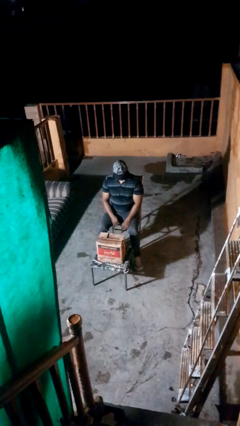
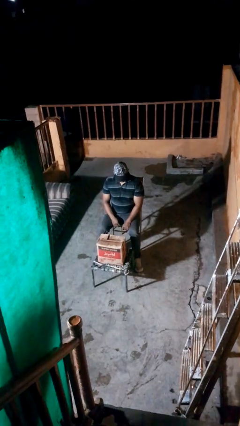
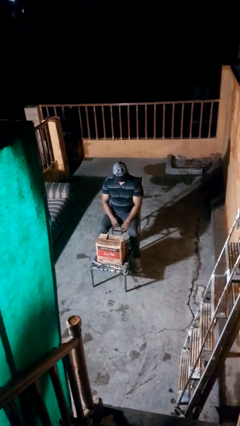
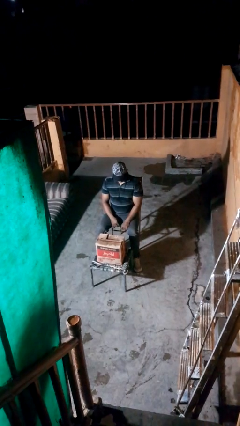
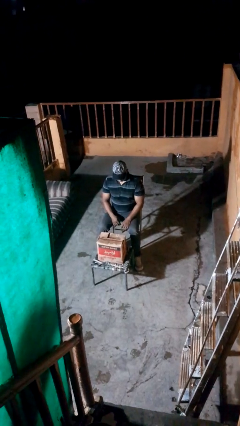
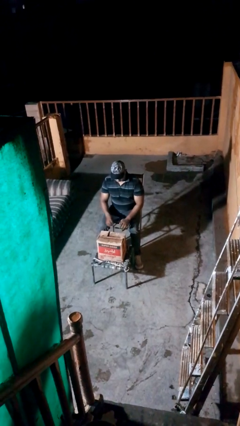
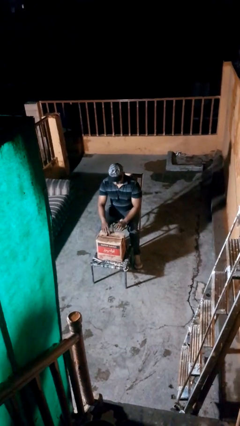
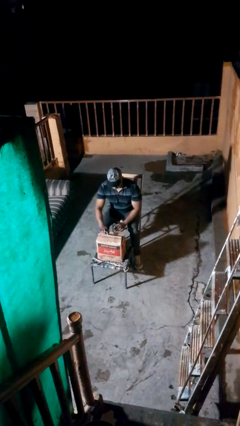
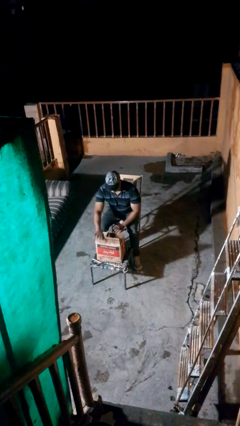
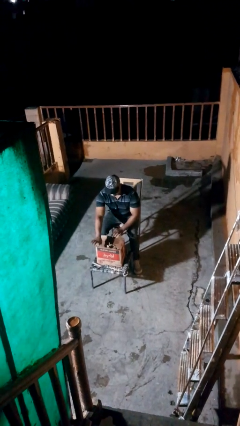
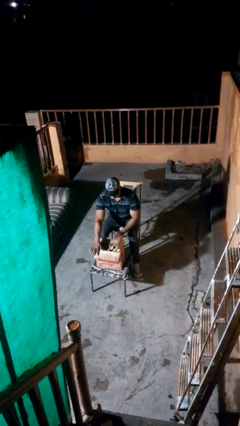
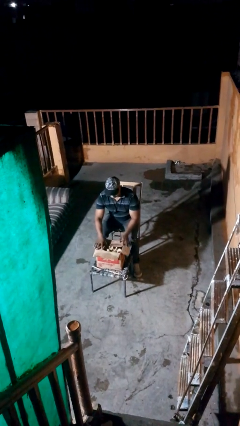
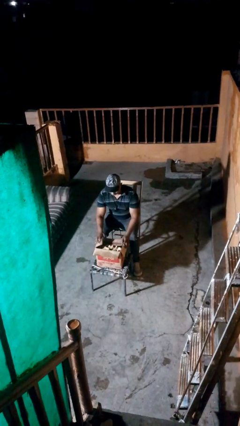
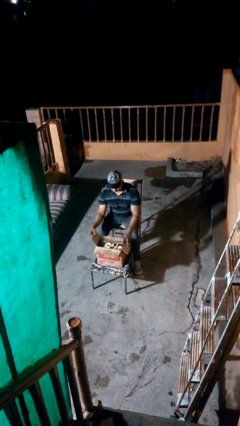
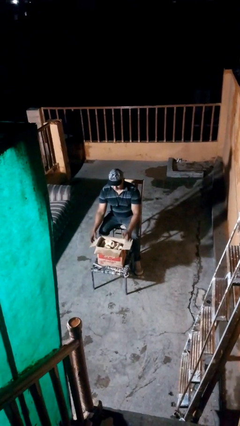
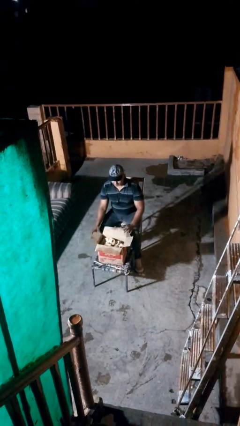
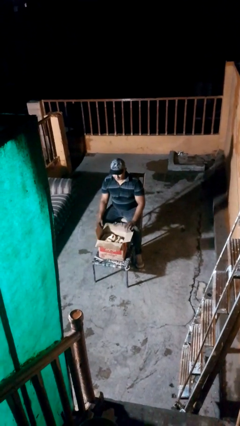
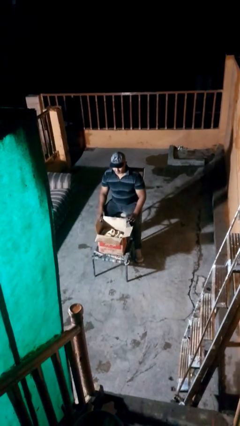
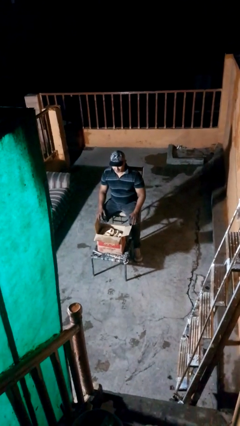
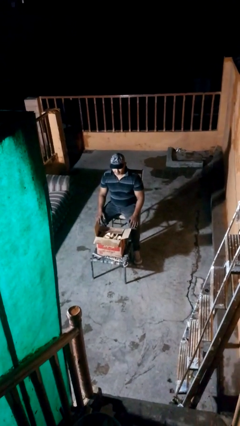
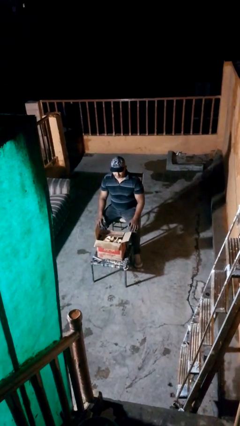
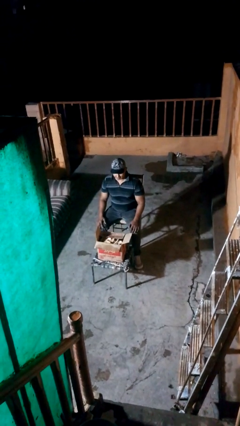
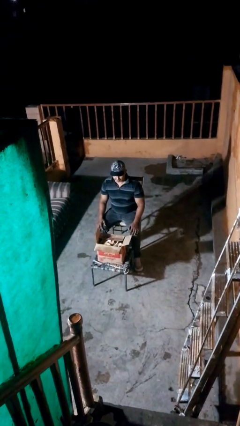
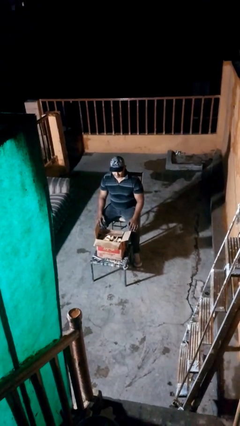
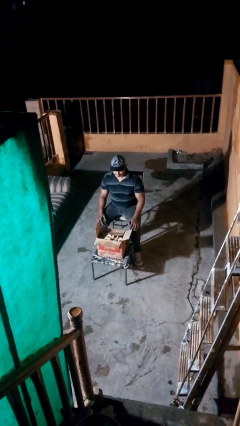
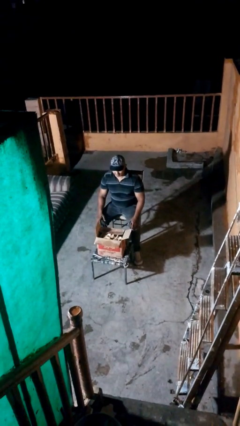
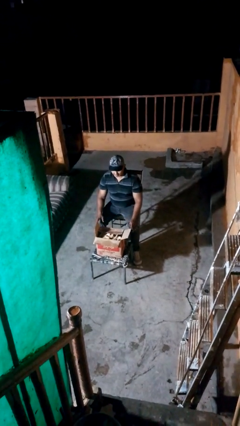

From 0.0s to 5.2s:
person opens box

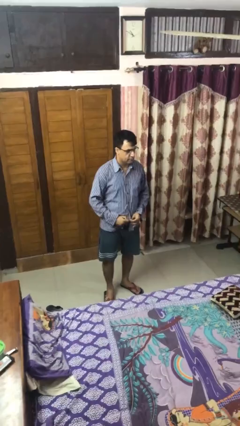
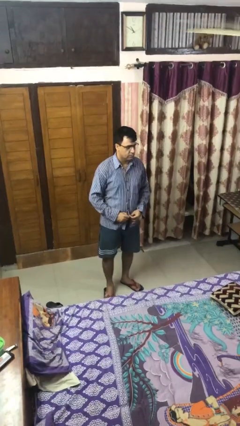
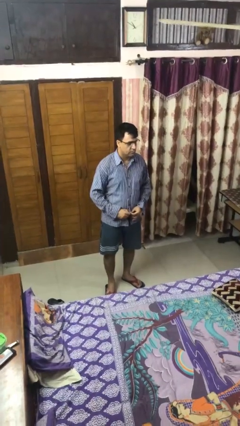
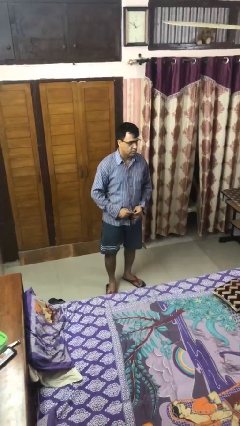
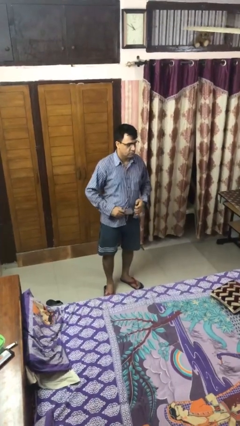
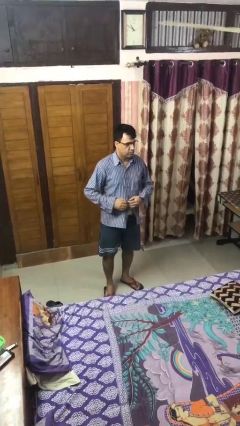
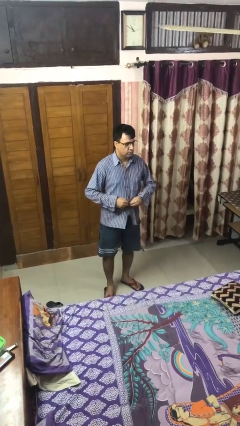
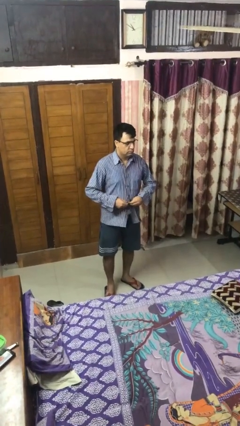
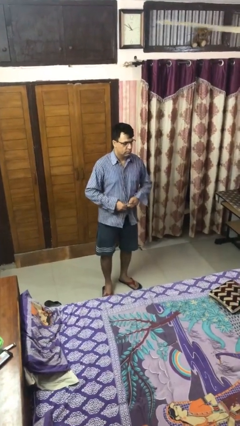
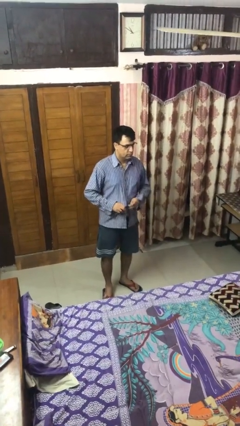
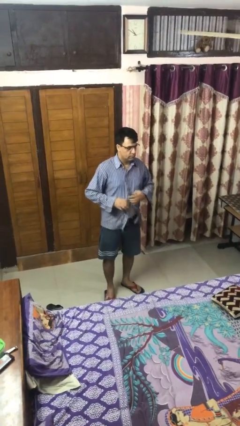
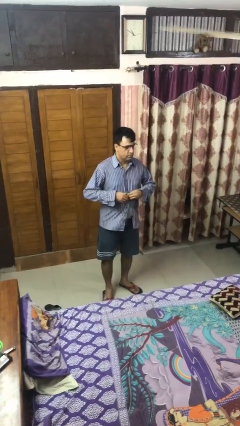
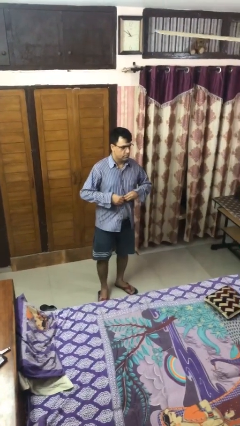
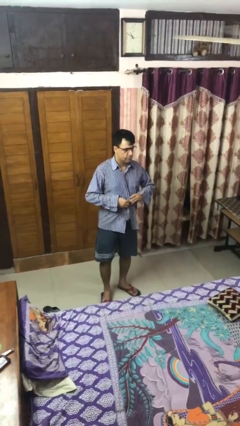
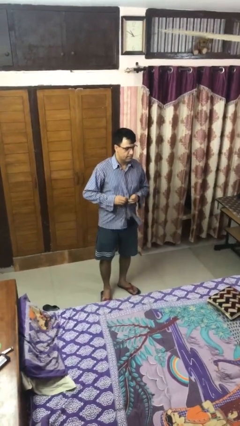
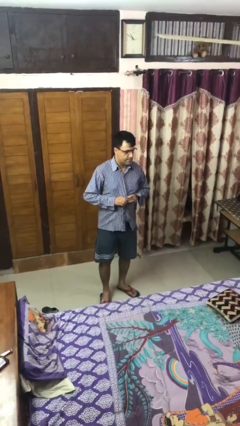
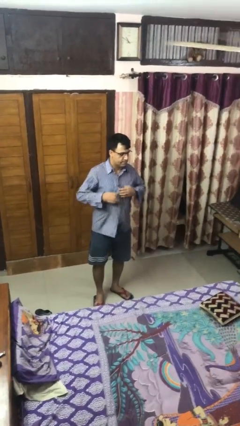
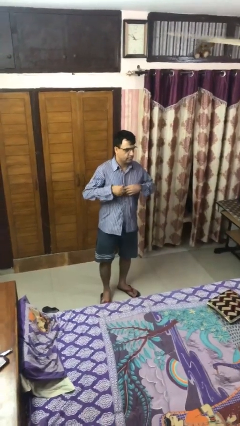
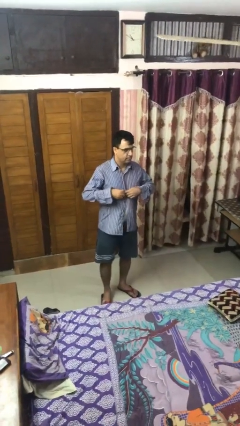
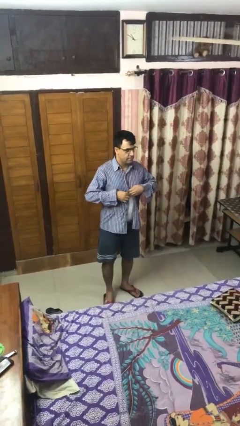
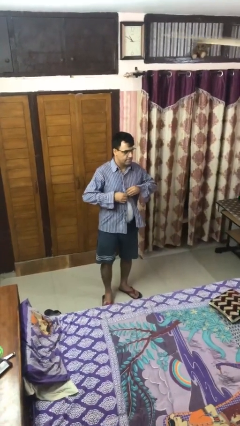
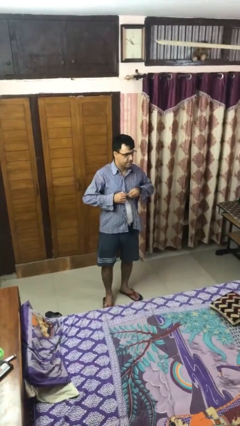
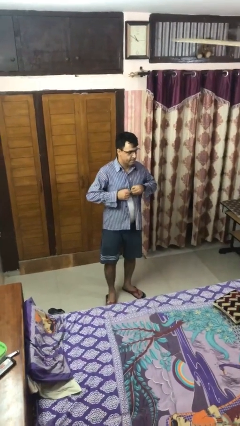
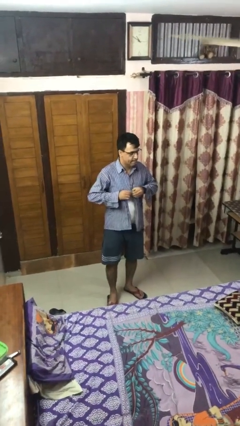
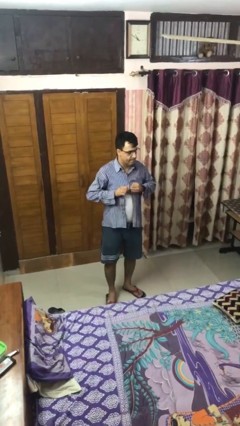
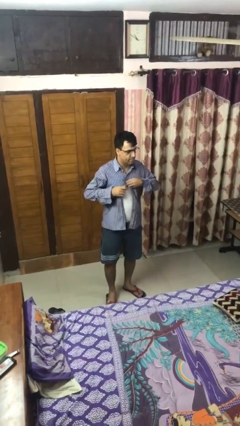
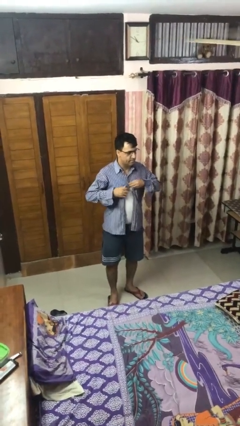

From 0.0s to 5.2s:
person unbuttons shirt

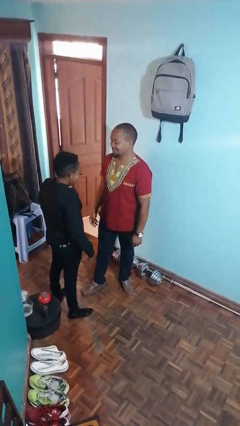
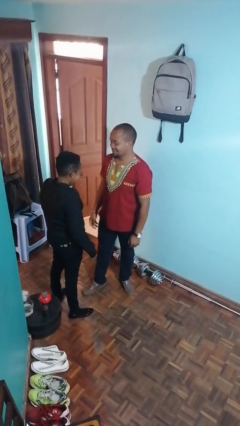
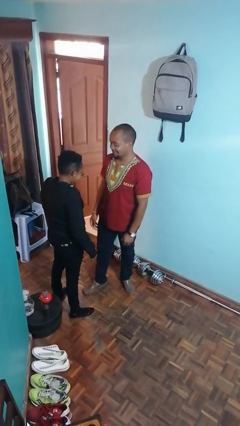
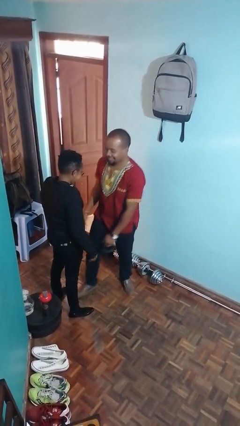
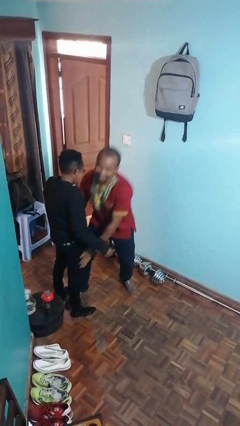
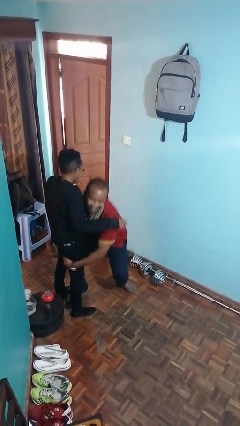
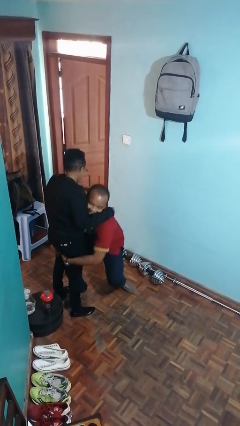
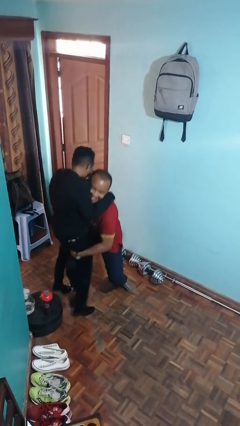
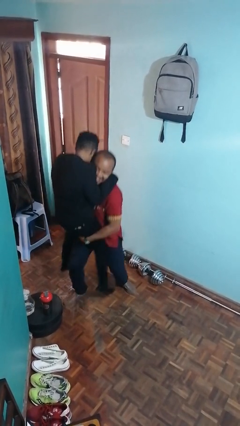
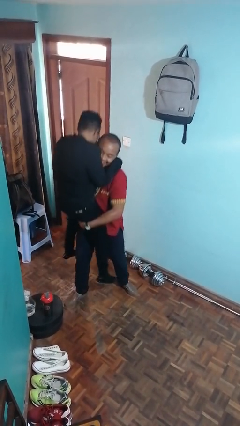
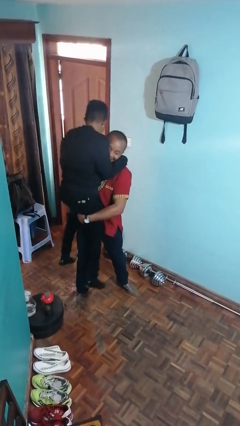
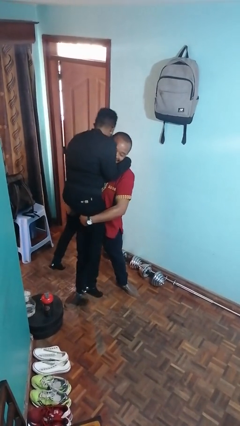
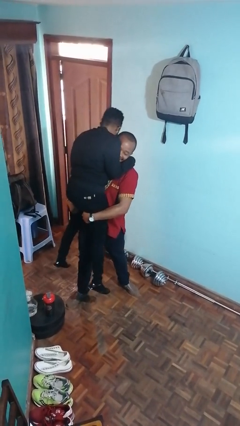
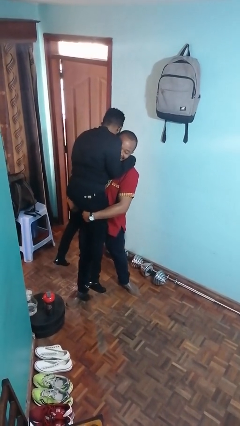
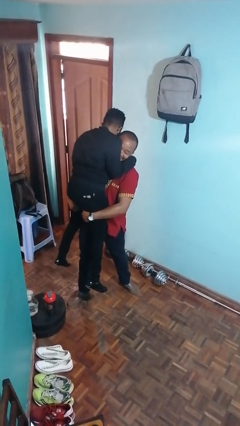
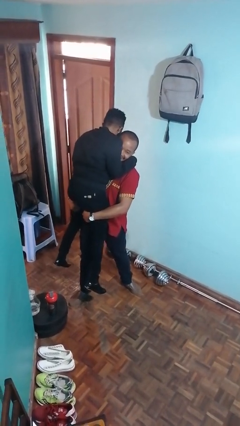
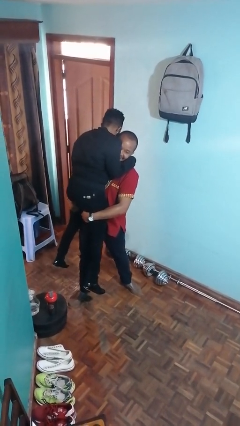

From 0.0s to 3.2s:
person picks up person

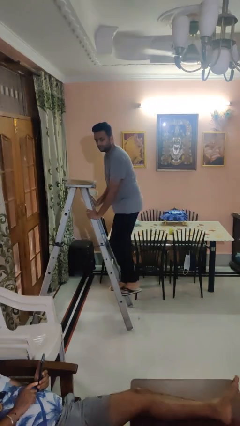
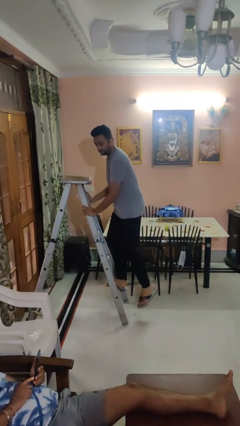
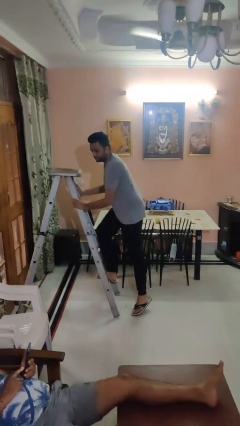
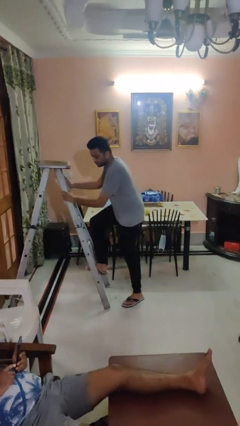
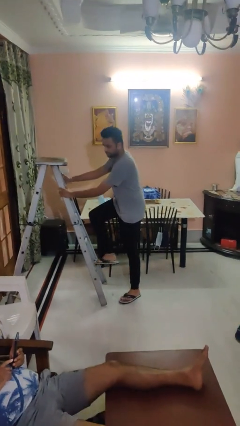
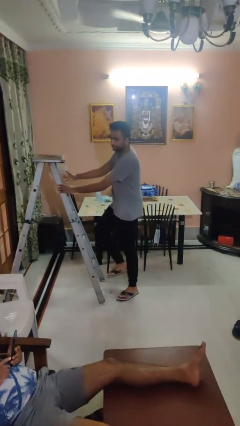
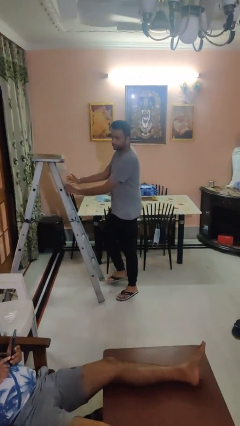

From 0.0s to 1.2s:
person climbs down ladder

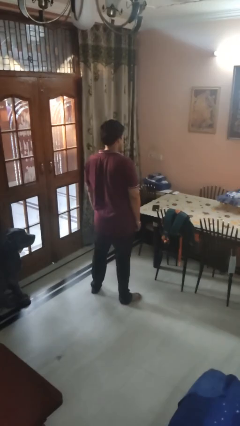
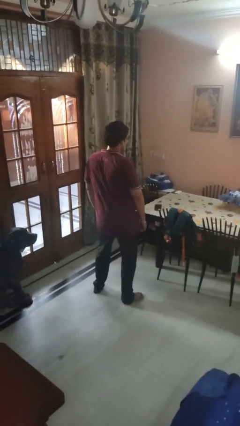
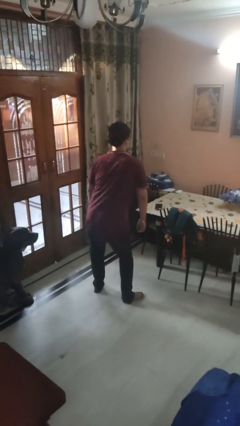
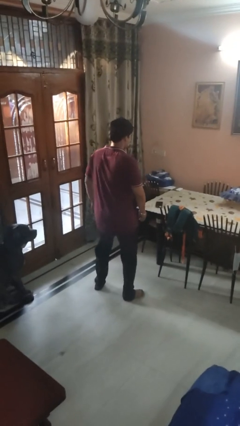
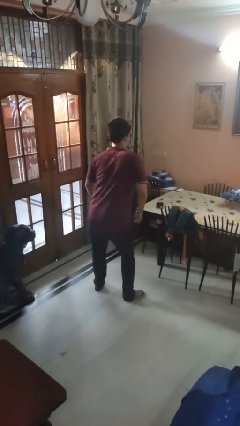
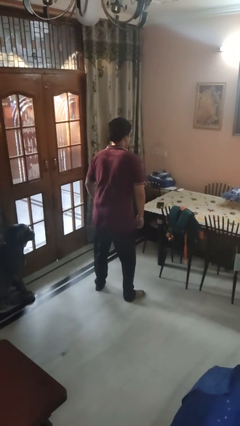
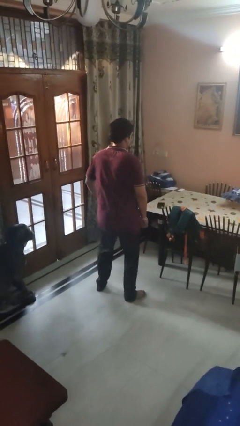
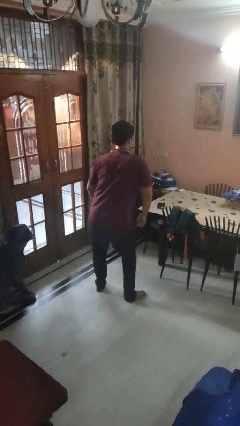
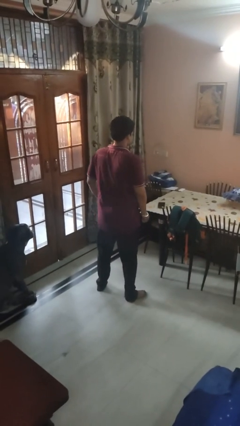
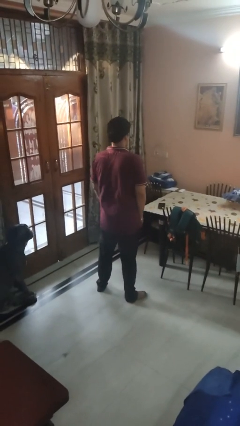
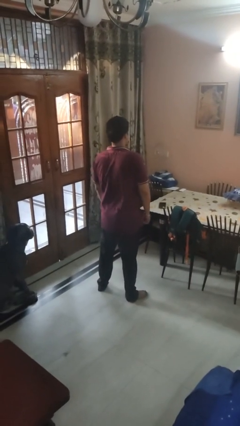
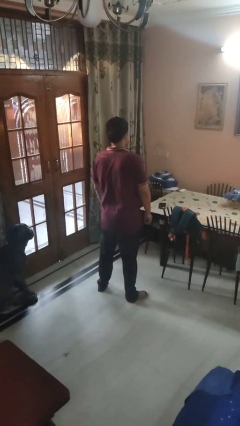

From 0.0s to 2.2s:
person wiggles hips

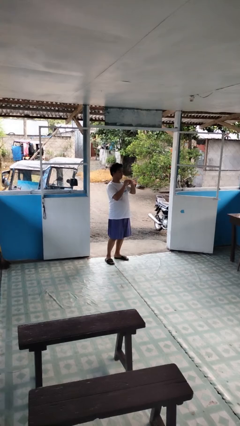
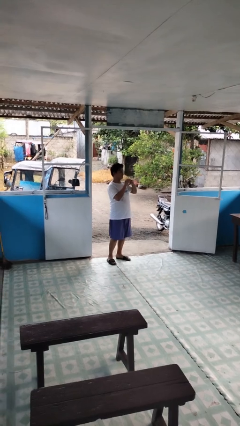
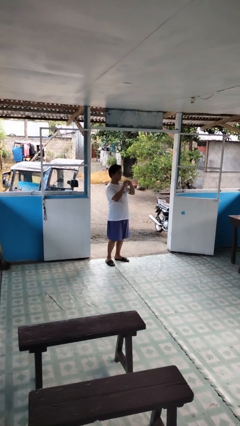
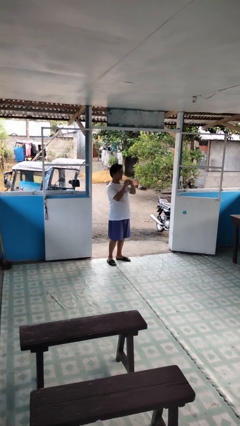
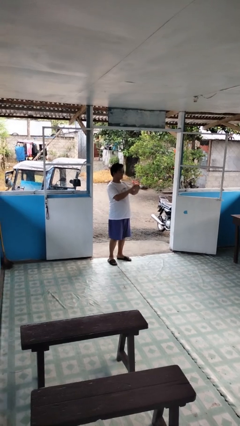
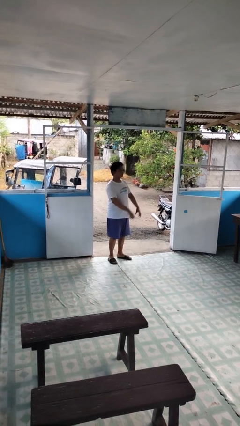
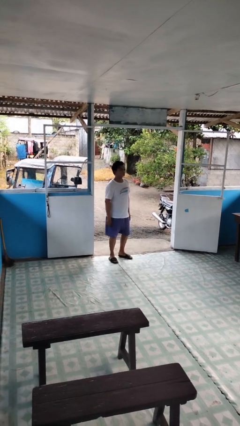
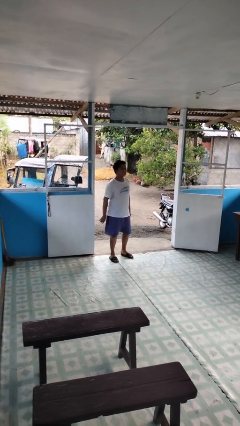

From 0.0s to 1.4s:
person gestures heart
